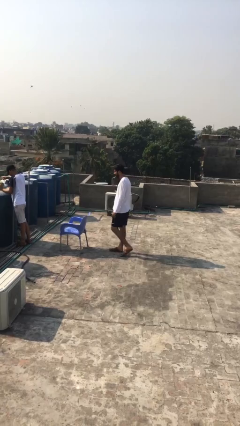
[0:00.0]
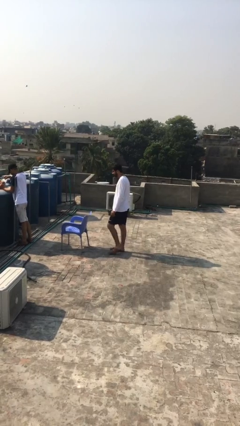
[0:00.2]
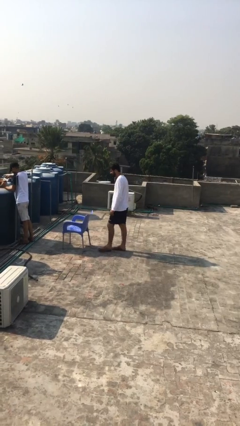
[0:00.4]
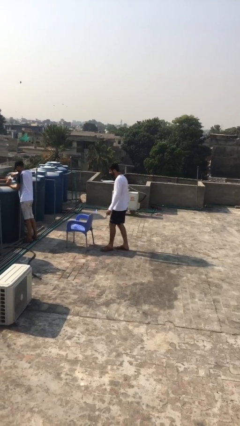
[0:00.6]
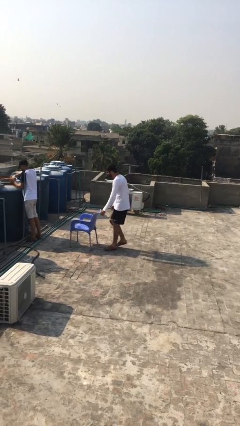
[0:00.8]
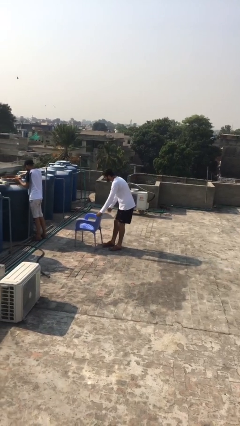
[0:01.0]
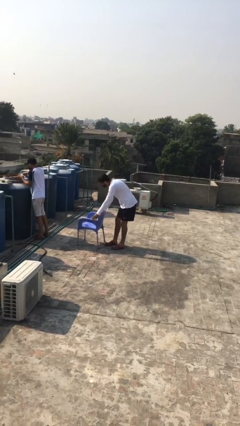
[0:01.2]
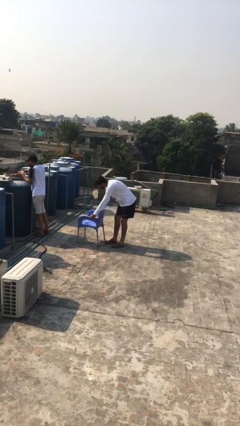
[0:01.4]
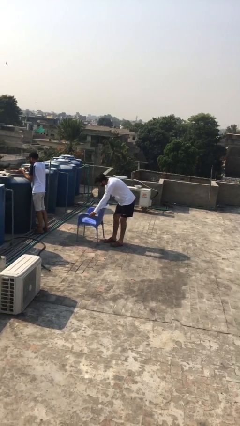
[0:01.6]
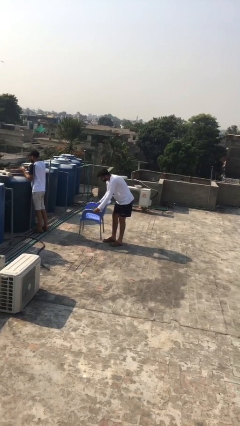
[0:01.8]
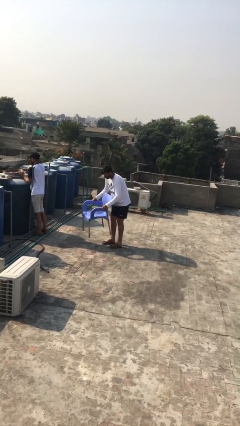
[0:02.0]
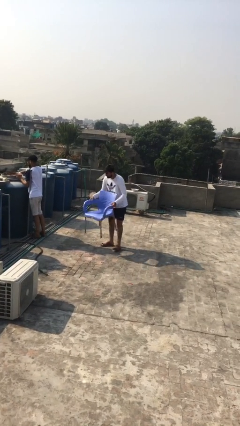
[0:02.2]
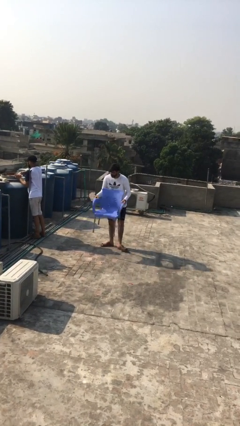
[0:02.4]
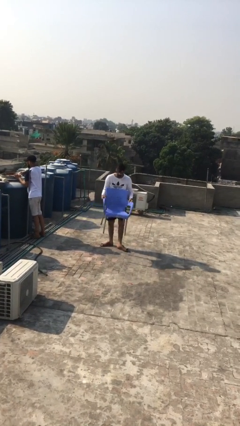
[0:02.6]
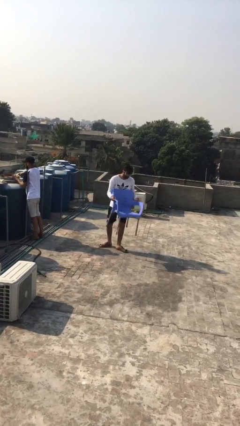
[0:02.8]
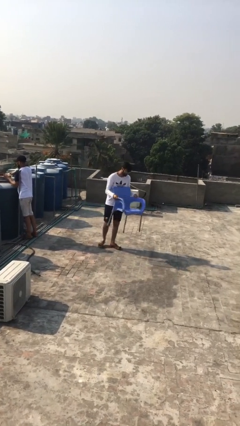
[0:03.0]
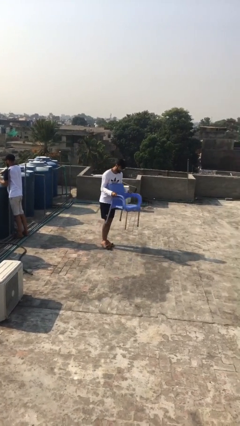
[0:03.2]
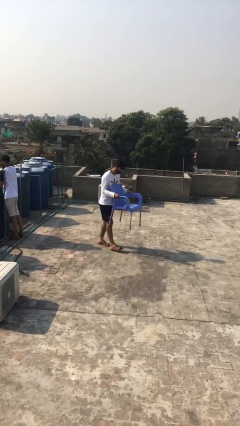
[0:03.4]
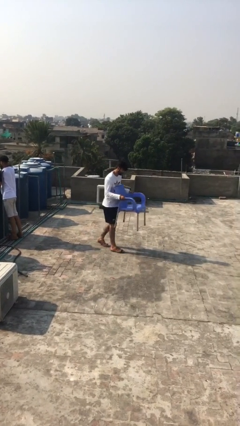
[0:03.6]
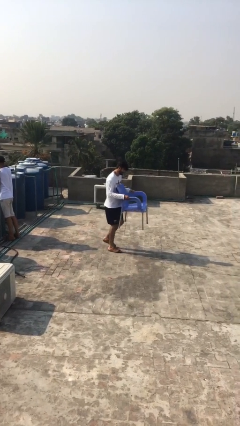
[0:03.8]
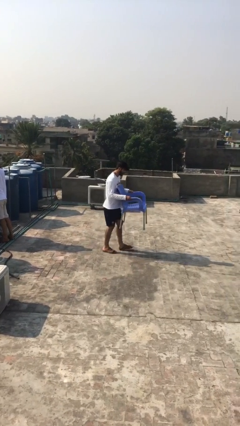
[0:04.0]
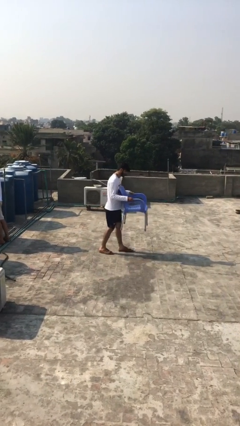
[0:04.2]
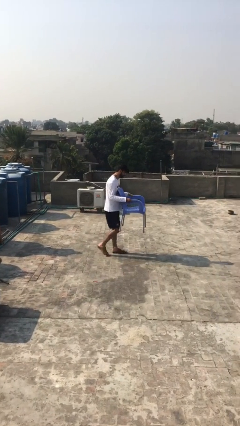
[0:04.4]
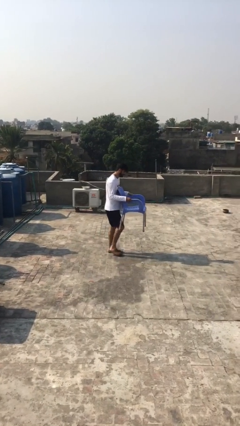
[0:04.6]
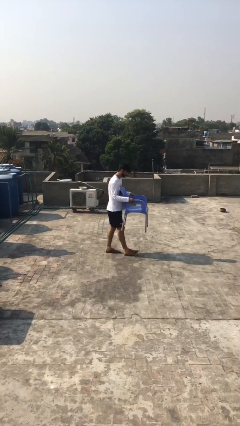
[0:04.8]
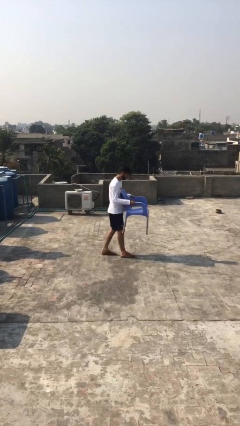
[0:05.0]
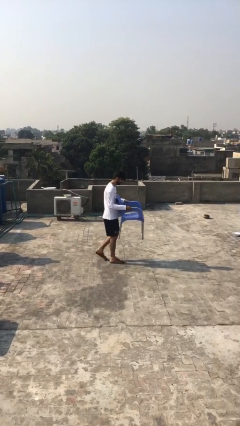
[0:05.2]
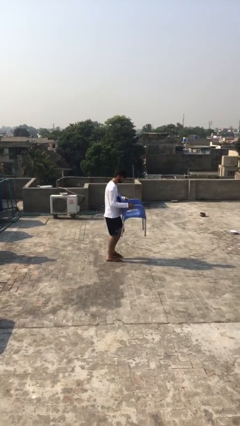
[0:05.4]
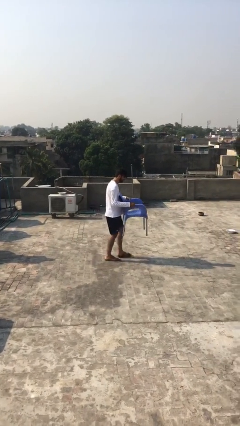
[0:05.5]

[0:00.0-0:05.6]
person steals object from person

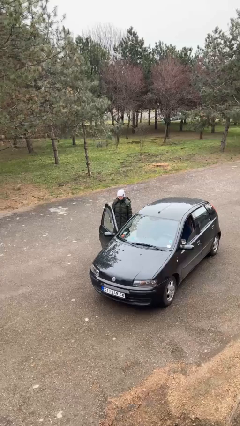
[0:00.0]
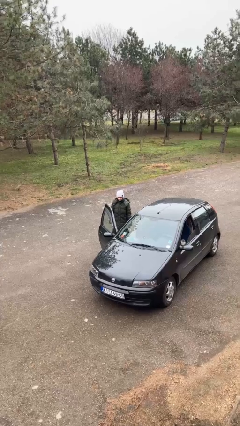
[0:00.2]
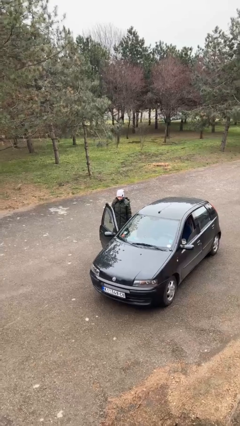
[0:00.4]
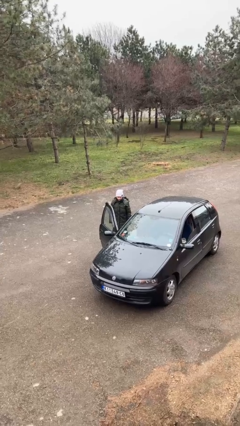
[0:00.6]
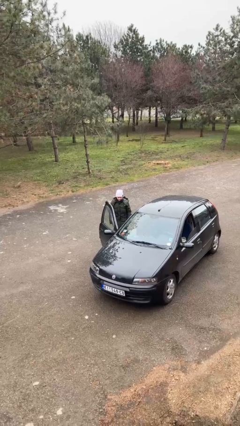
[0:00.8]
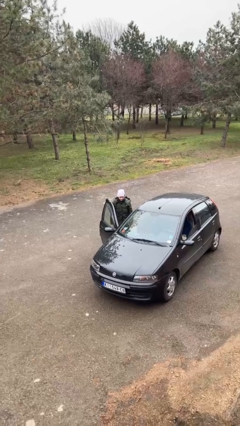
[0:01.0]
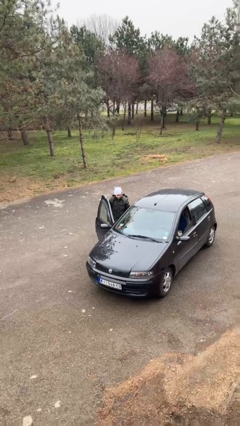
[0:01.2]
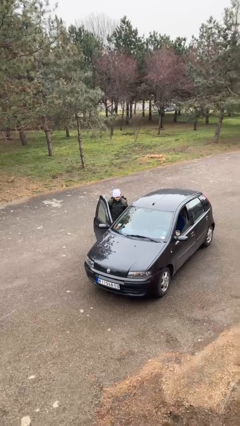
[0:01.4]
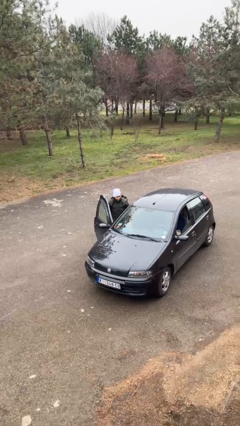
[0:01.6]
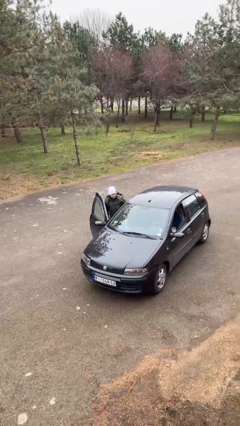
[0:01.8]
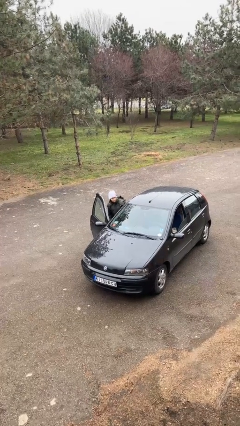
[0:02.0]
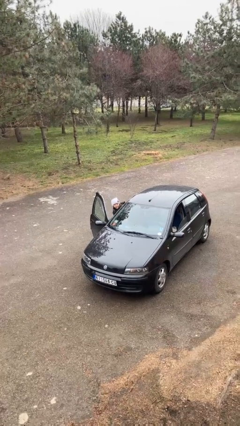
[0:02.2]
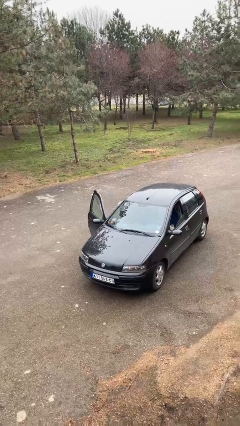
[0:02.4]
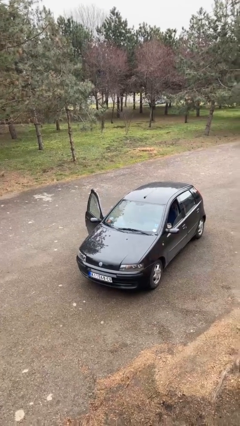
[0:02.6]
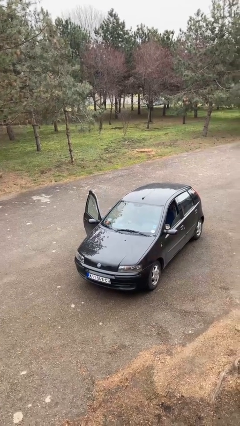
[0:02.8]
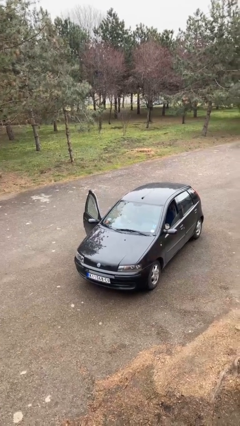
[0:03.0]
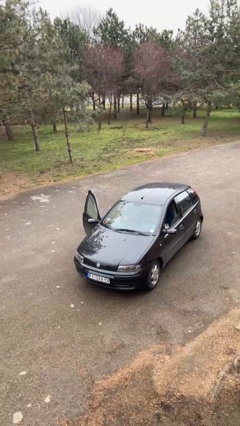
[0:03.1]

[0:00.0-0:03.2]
person enters car

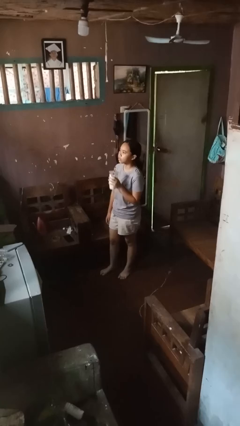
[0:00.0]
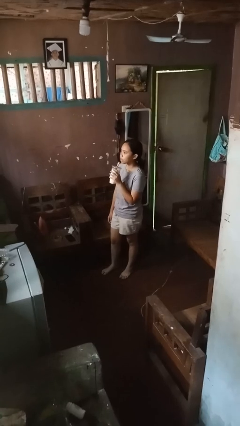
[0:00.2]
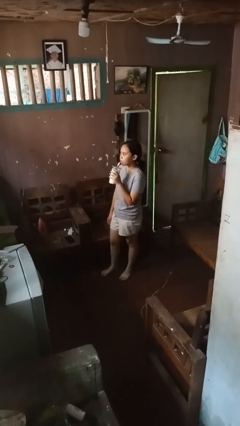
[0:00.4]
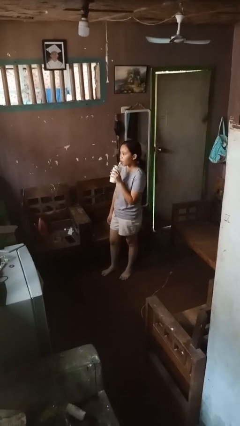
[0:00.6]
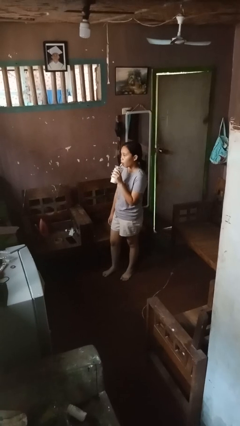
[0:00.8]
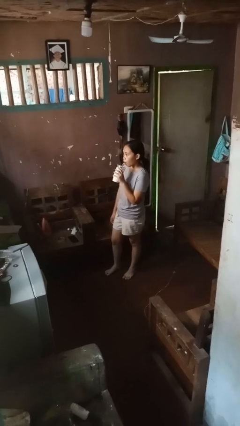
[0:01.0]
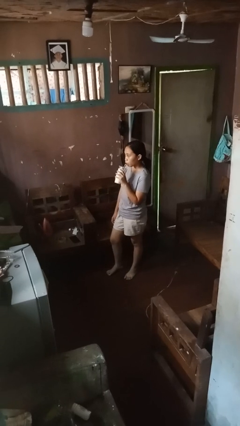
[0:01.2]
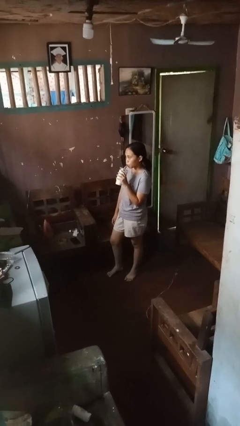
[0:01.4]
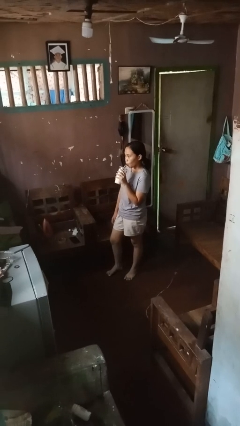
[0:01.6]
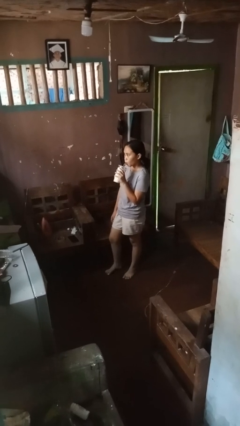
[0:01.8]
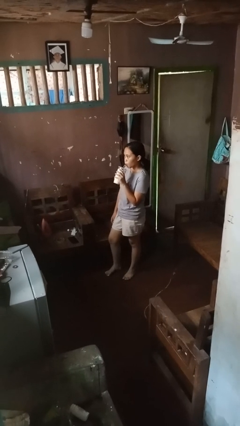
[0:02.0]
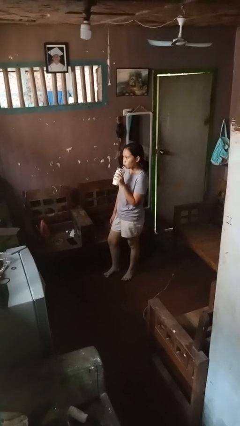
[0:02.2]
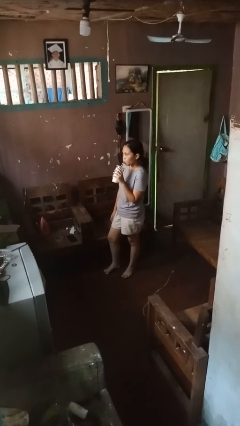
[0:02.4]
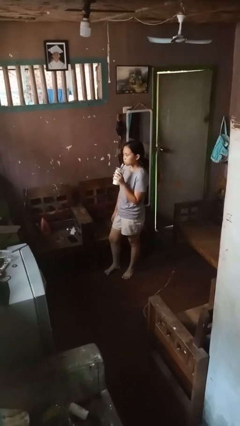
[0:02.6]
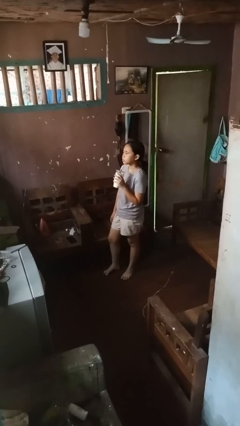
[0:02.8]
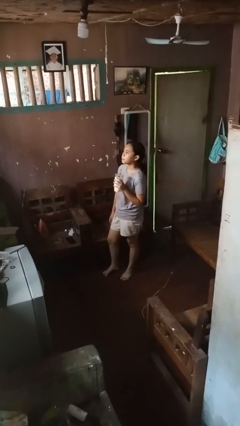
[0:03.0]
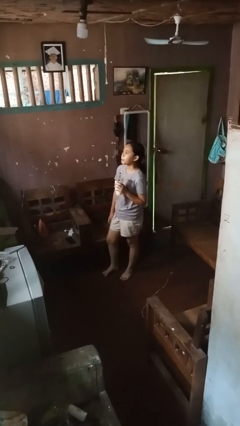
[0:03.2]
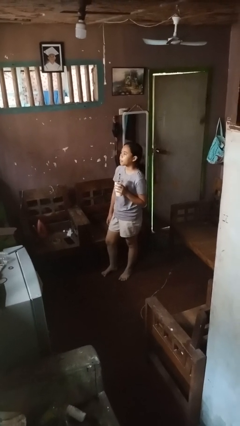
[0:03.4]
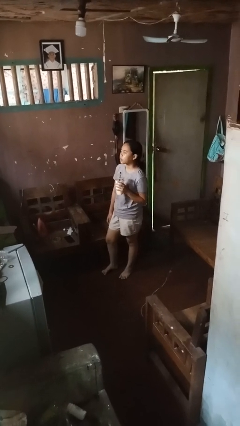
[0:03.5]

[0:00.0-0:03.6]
person drinks from straw

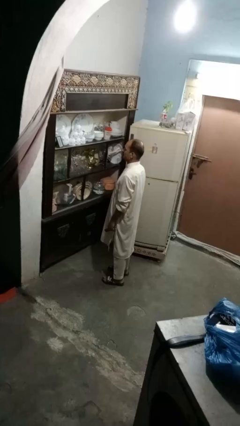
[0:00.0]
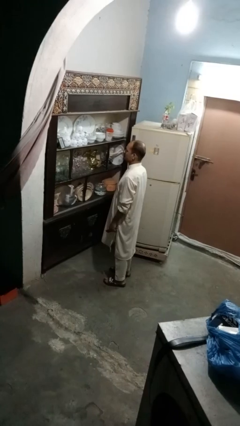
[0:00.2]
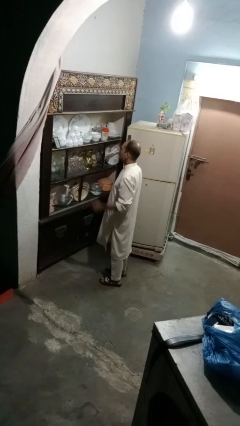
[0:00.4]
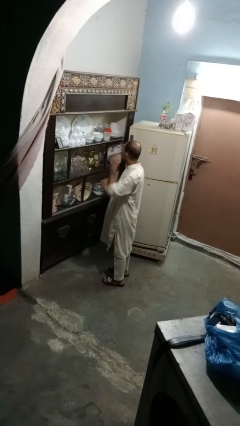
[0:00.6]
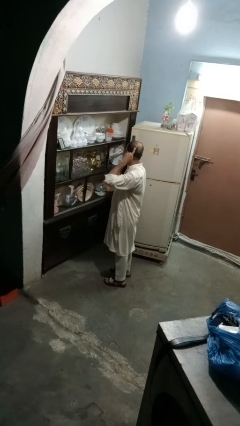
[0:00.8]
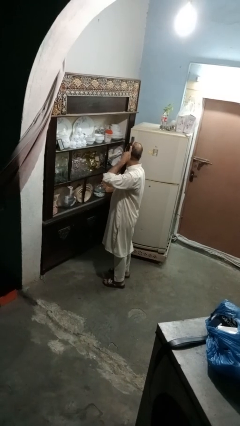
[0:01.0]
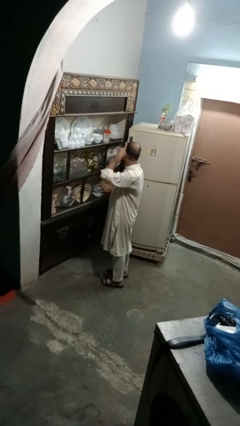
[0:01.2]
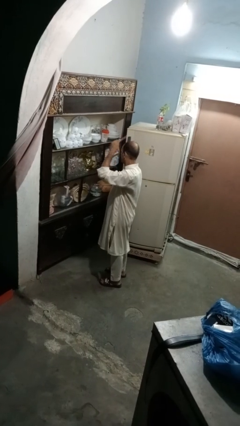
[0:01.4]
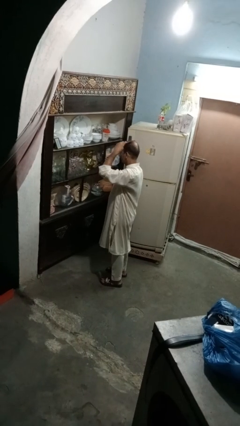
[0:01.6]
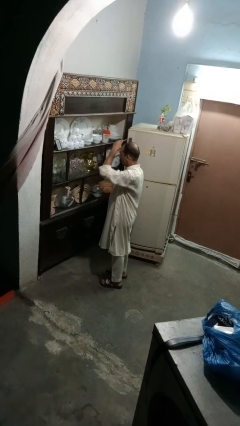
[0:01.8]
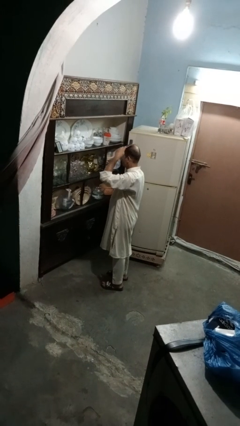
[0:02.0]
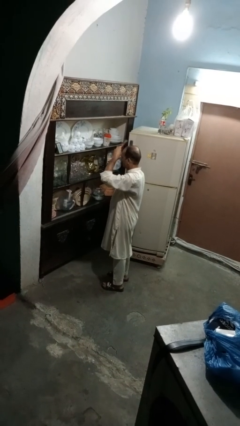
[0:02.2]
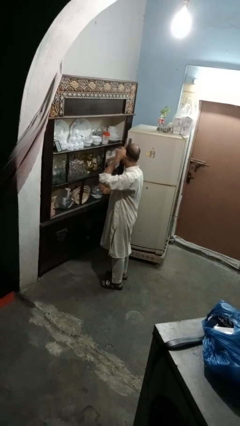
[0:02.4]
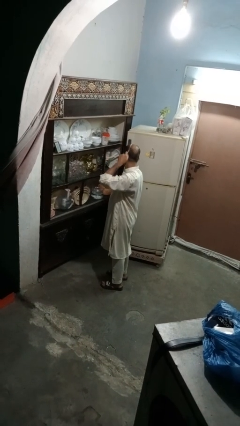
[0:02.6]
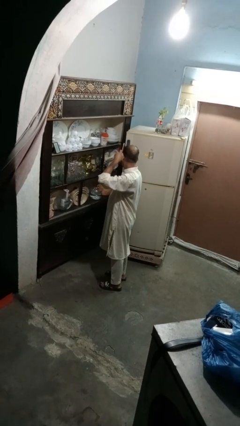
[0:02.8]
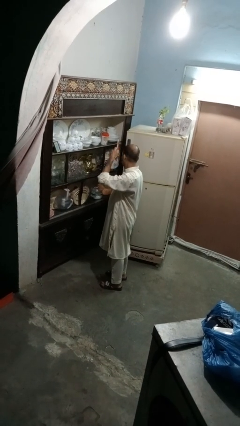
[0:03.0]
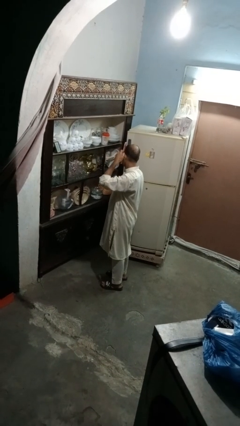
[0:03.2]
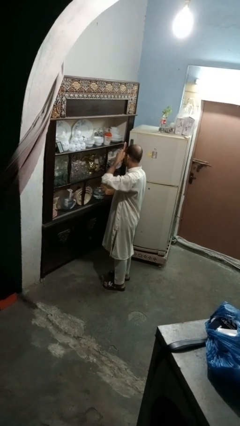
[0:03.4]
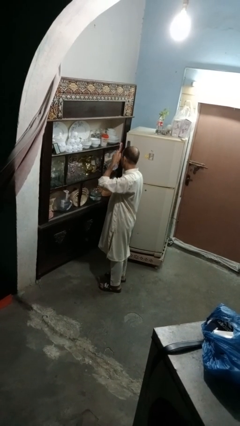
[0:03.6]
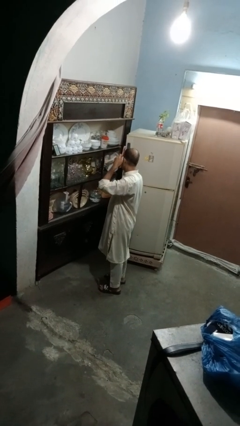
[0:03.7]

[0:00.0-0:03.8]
person brushes hair

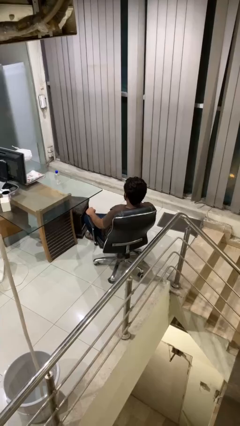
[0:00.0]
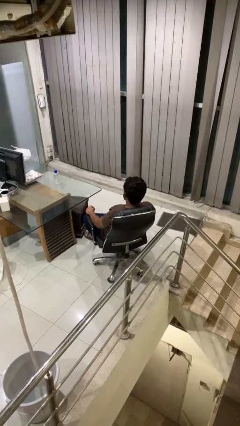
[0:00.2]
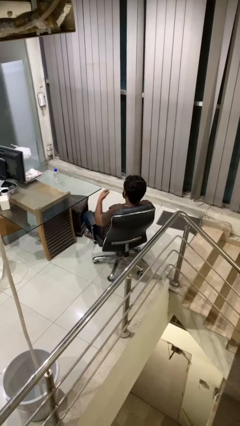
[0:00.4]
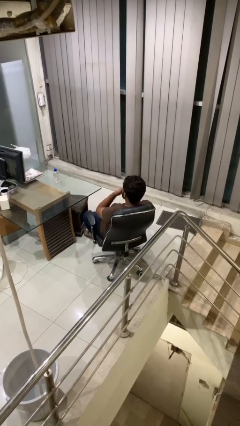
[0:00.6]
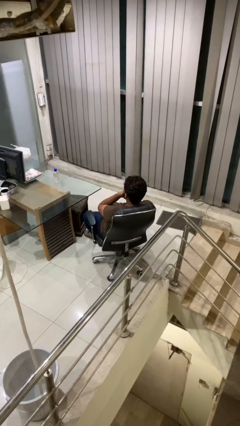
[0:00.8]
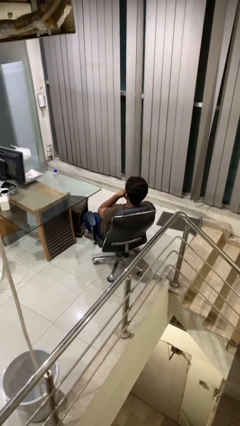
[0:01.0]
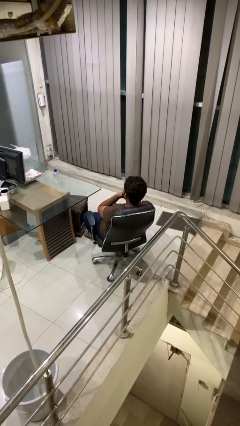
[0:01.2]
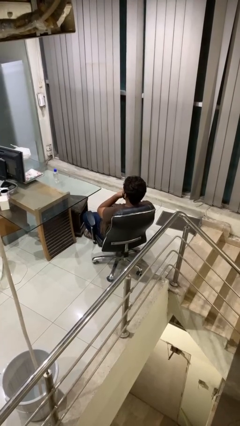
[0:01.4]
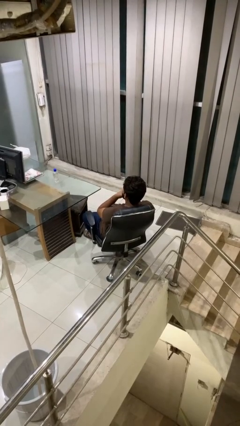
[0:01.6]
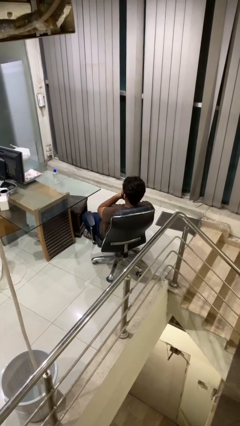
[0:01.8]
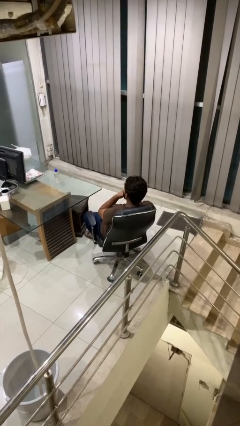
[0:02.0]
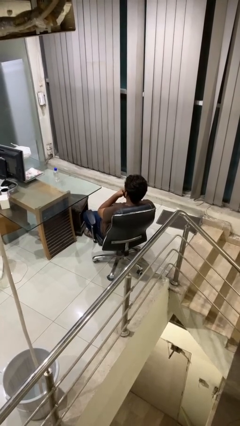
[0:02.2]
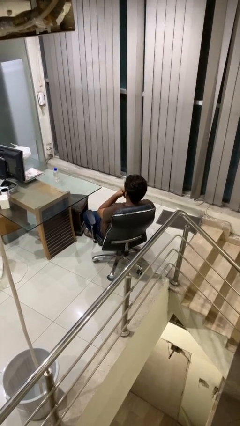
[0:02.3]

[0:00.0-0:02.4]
person strokes chin
